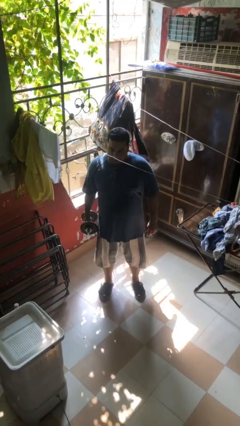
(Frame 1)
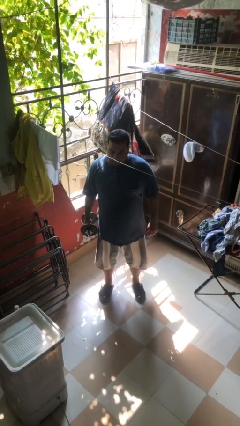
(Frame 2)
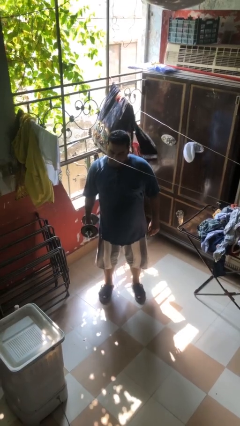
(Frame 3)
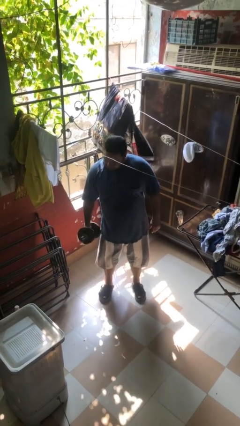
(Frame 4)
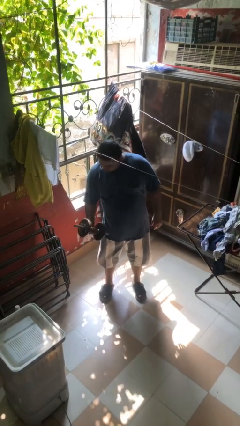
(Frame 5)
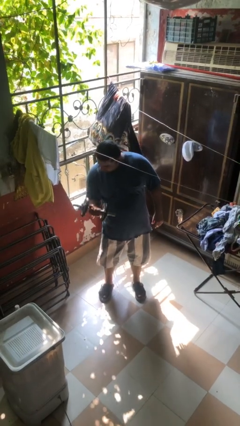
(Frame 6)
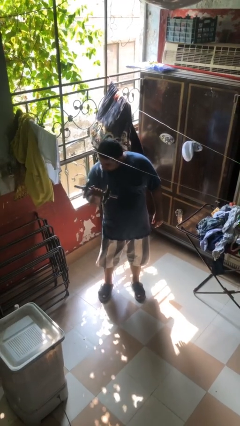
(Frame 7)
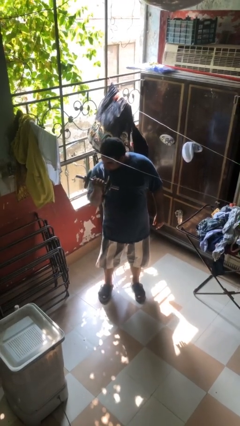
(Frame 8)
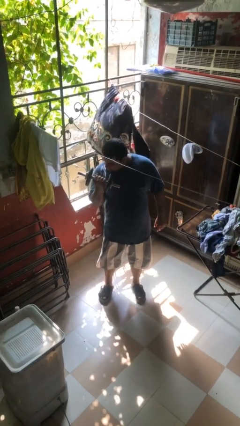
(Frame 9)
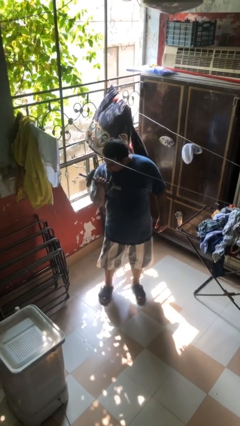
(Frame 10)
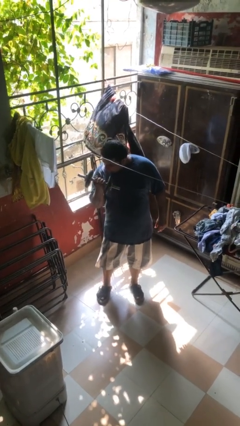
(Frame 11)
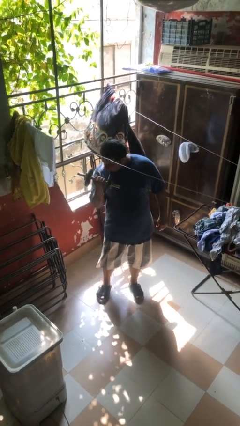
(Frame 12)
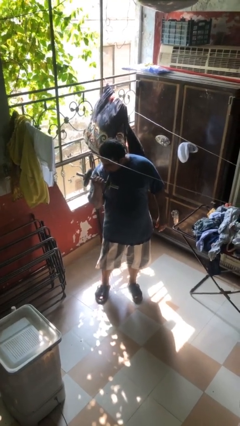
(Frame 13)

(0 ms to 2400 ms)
person lifts dumbbells

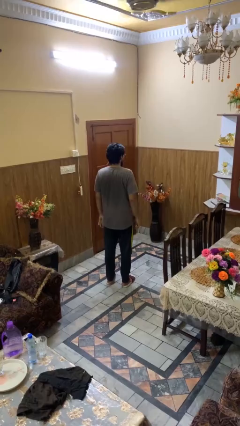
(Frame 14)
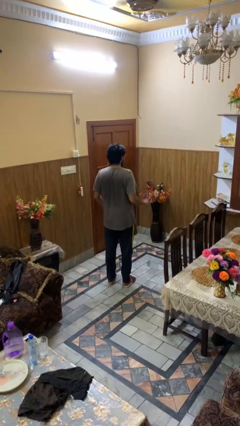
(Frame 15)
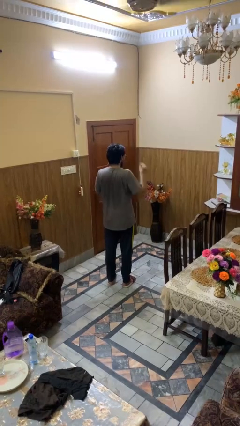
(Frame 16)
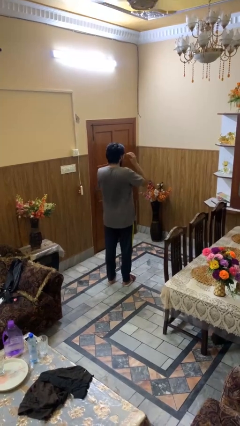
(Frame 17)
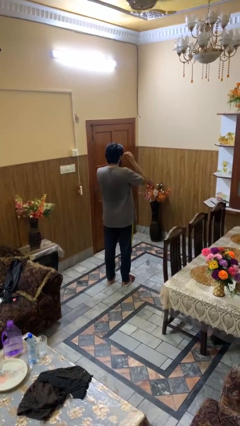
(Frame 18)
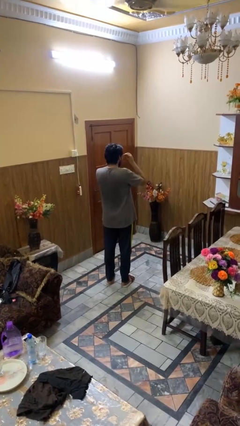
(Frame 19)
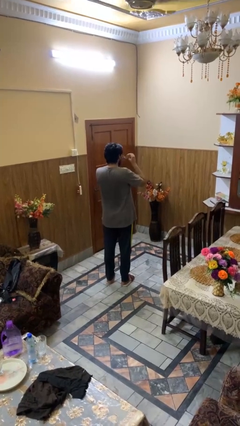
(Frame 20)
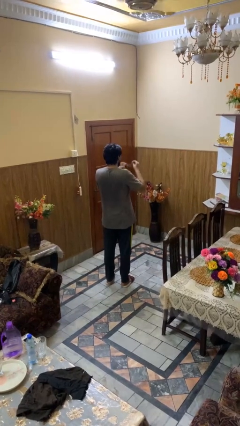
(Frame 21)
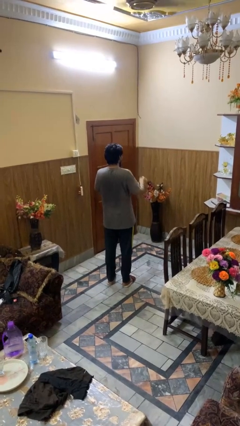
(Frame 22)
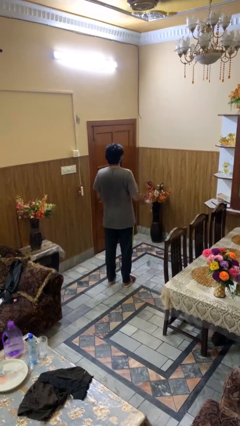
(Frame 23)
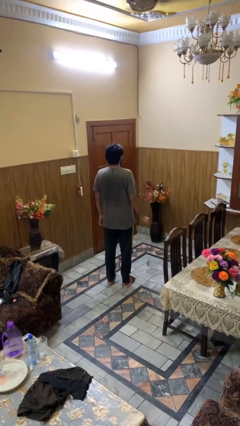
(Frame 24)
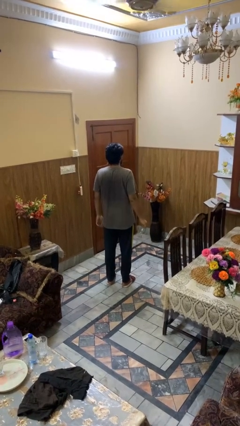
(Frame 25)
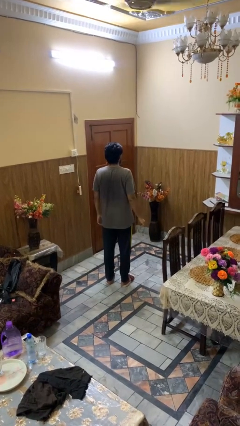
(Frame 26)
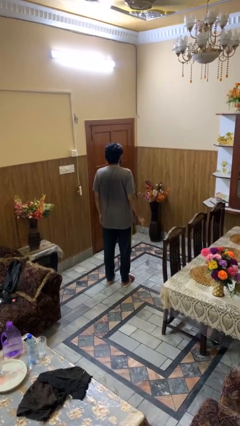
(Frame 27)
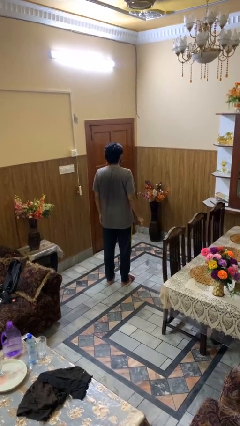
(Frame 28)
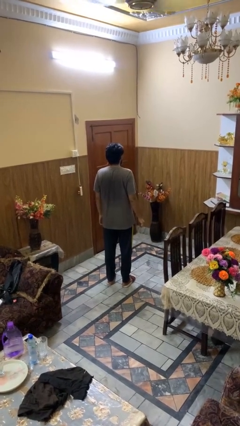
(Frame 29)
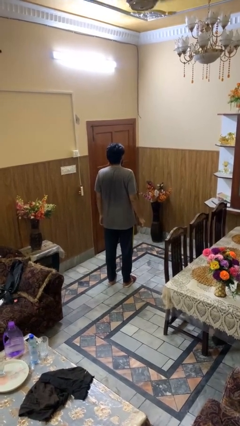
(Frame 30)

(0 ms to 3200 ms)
person takes off glasses

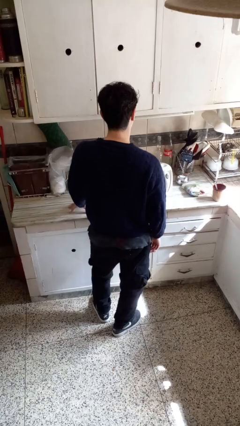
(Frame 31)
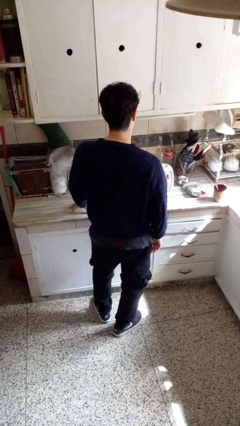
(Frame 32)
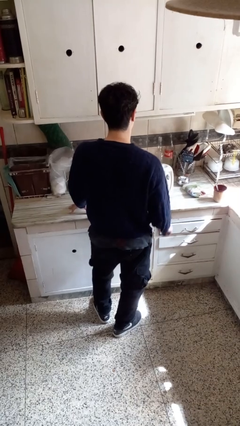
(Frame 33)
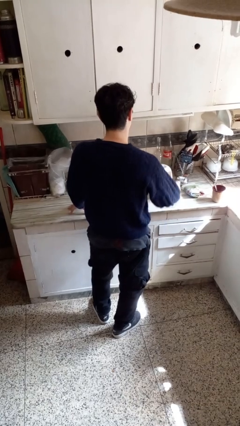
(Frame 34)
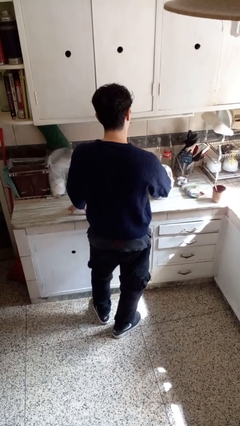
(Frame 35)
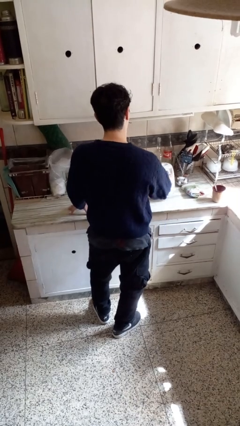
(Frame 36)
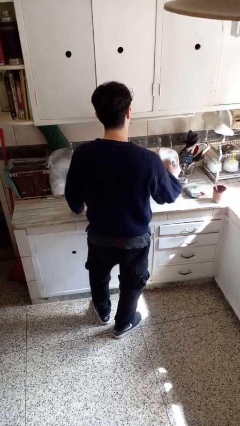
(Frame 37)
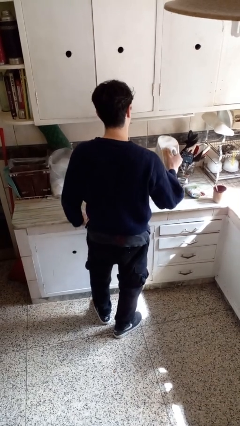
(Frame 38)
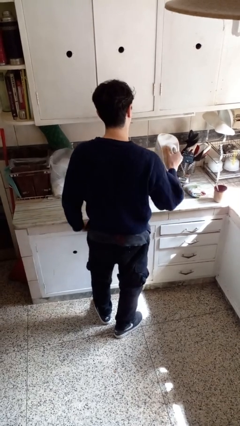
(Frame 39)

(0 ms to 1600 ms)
person picks up object from countertop

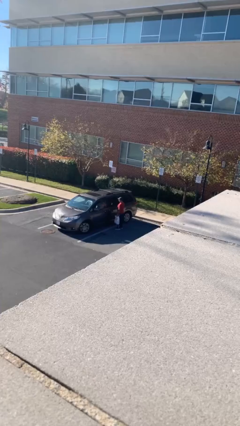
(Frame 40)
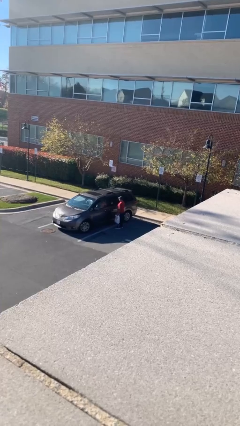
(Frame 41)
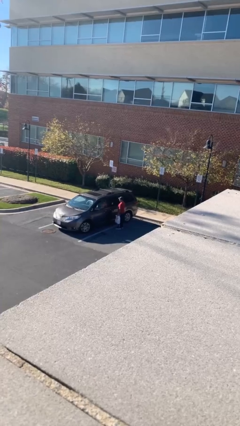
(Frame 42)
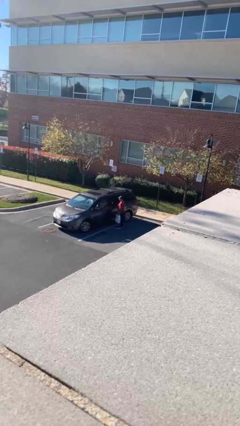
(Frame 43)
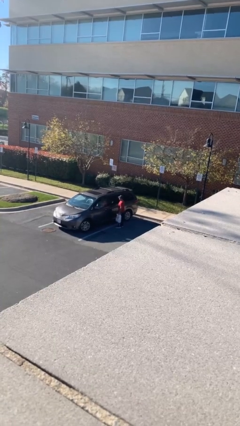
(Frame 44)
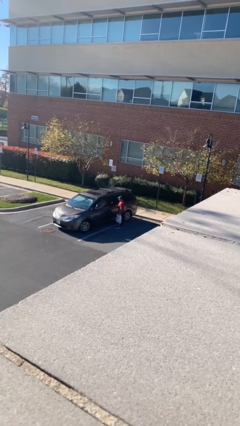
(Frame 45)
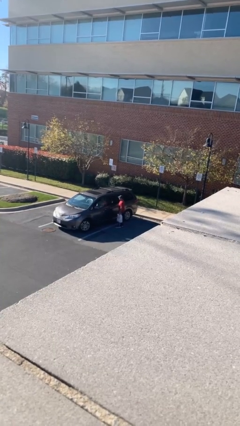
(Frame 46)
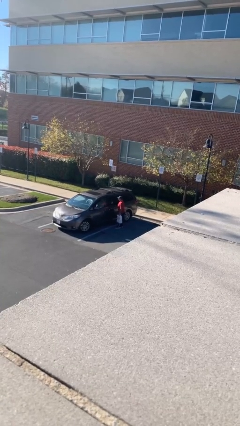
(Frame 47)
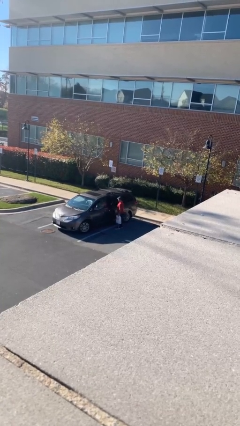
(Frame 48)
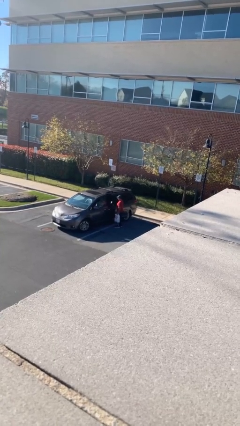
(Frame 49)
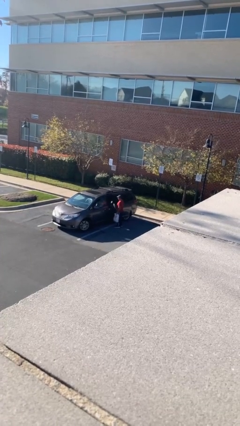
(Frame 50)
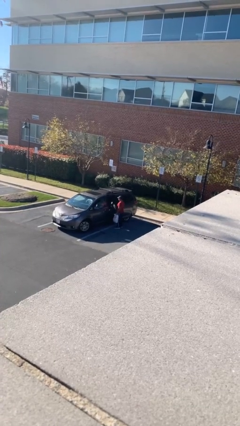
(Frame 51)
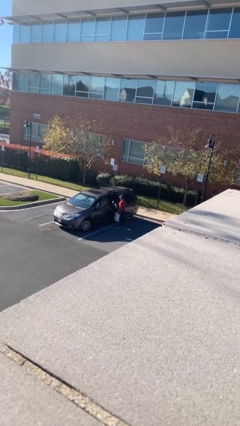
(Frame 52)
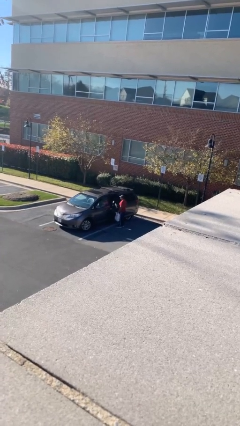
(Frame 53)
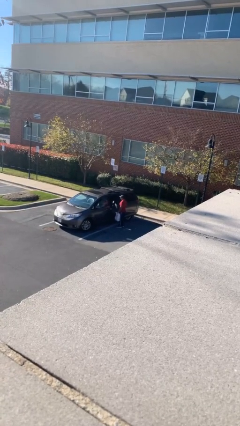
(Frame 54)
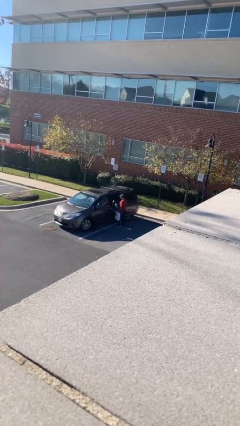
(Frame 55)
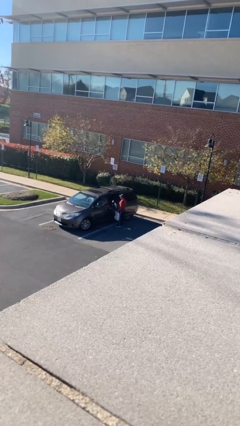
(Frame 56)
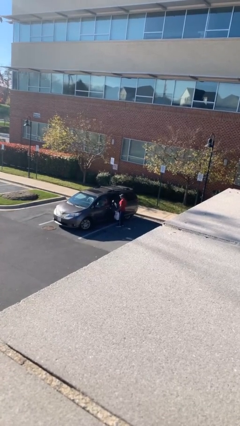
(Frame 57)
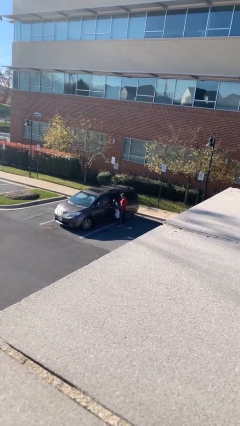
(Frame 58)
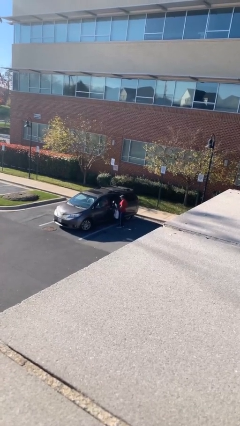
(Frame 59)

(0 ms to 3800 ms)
person opens car door

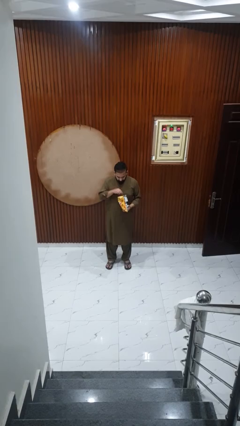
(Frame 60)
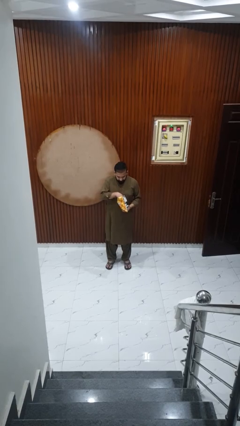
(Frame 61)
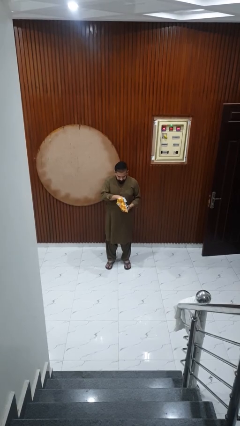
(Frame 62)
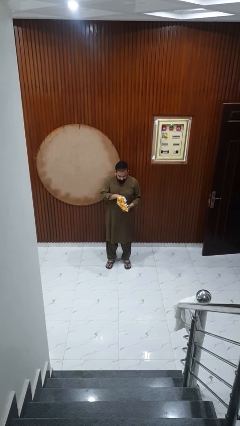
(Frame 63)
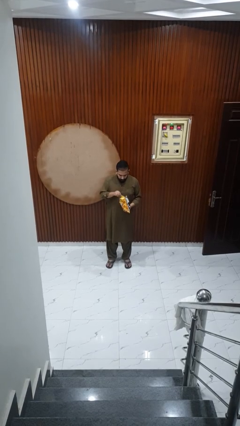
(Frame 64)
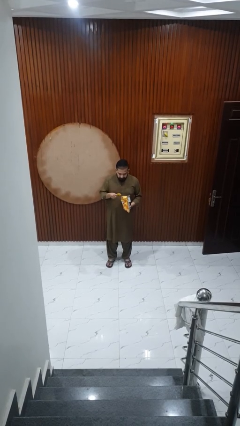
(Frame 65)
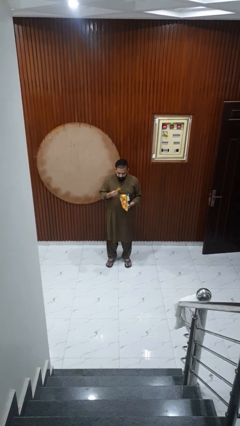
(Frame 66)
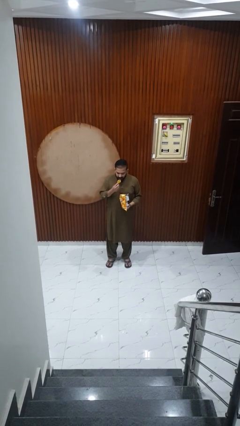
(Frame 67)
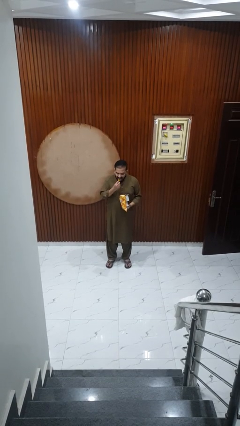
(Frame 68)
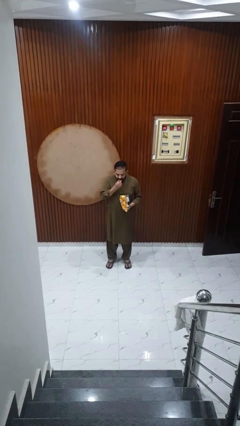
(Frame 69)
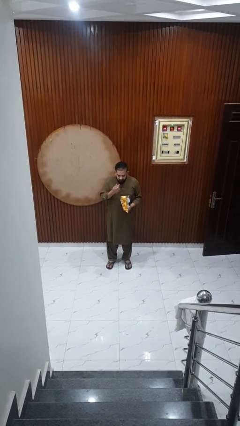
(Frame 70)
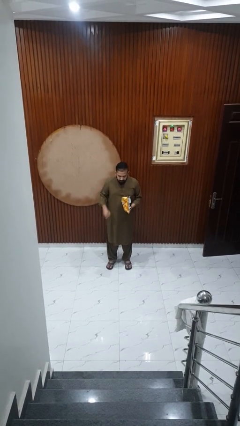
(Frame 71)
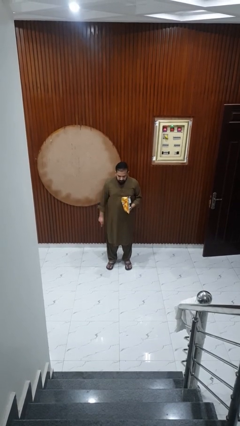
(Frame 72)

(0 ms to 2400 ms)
person eats snack from bag

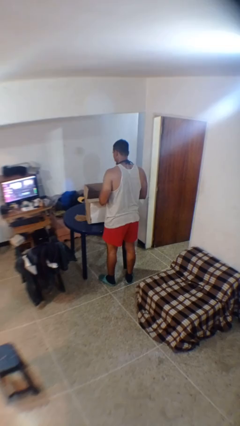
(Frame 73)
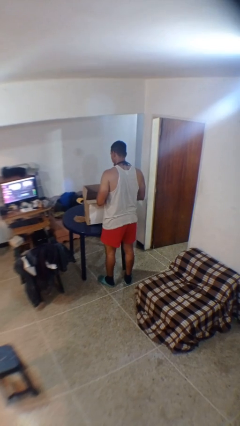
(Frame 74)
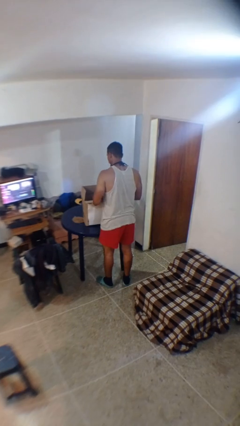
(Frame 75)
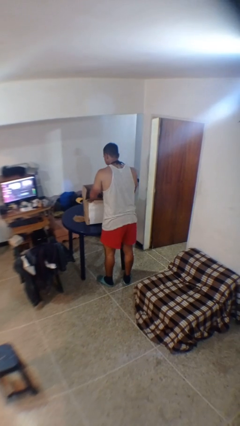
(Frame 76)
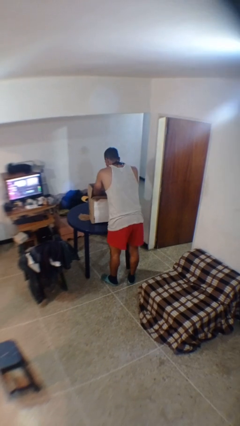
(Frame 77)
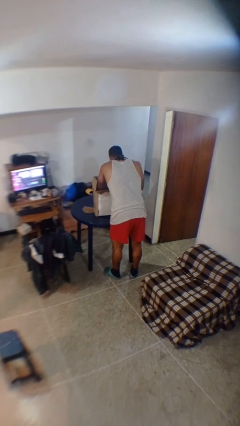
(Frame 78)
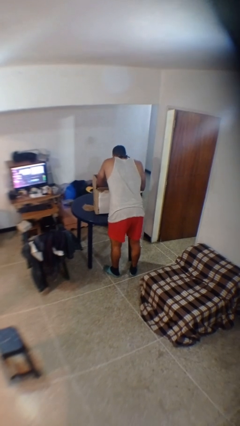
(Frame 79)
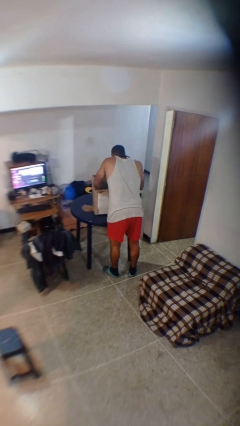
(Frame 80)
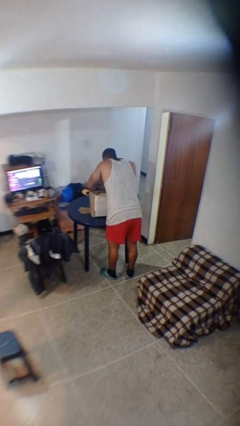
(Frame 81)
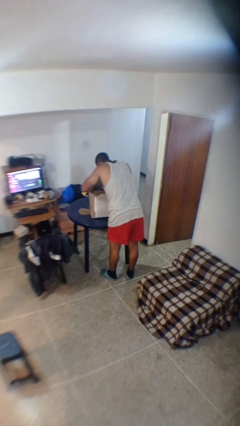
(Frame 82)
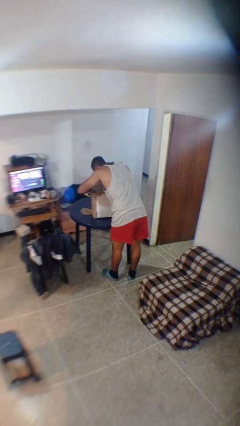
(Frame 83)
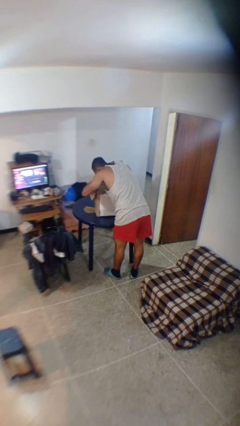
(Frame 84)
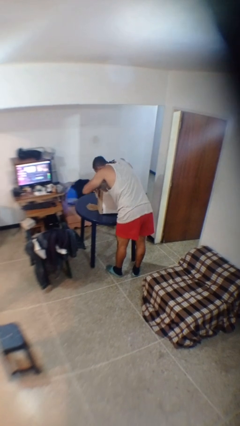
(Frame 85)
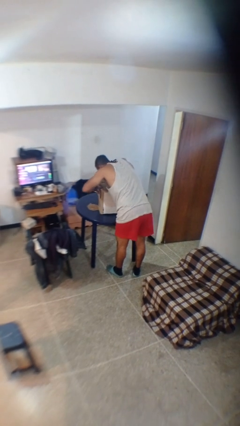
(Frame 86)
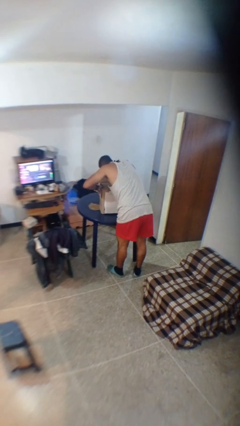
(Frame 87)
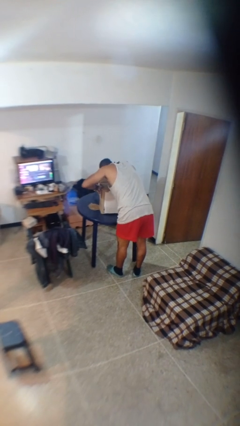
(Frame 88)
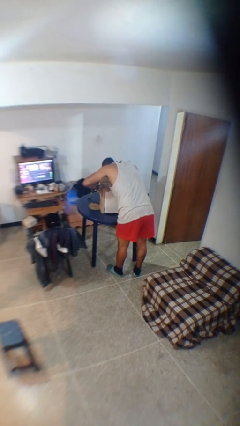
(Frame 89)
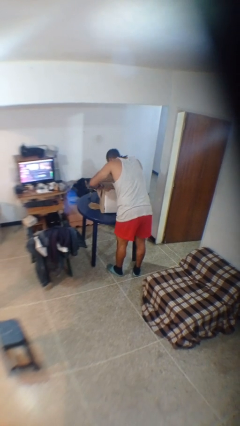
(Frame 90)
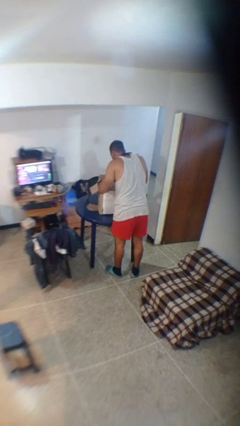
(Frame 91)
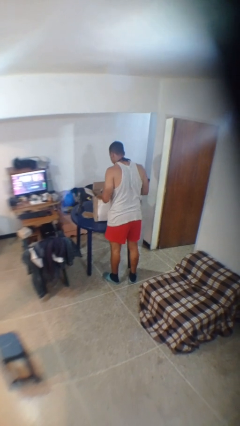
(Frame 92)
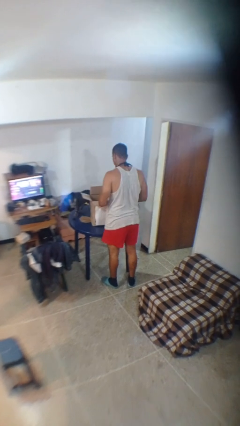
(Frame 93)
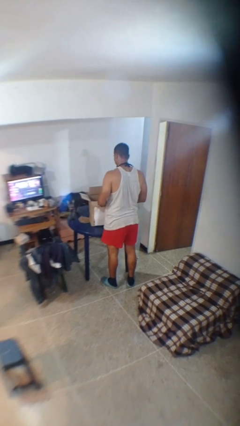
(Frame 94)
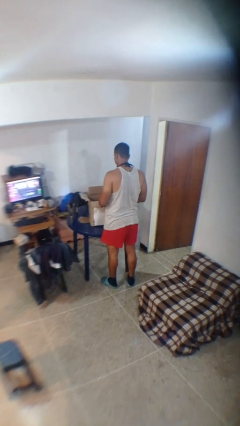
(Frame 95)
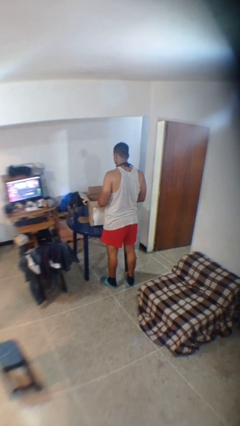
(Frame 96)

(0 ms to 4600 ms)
person searches in box
